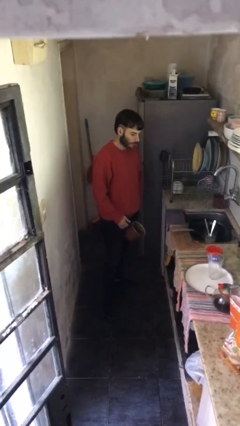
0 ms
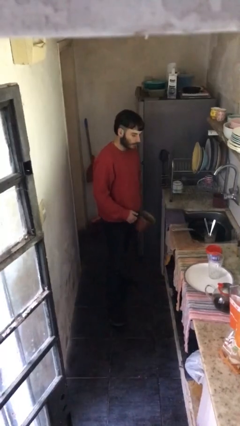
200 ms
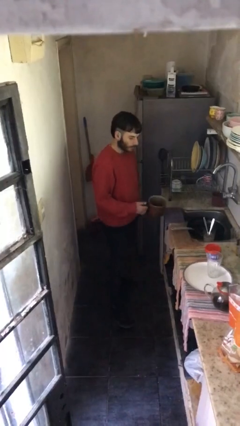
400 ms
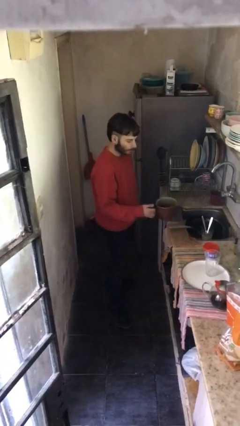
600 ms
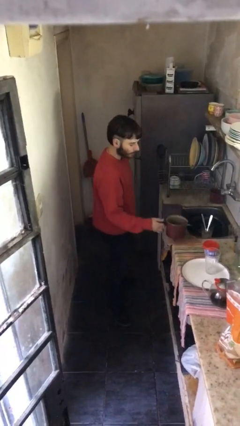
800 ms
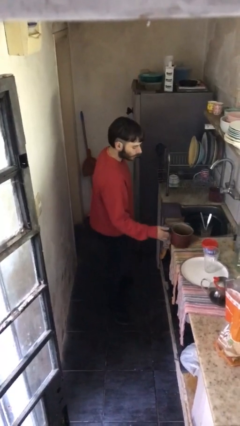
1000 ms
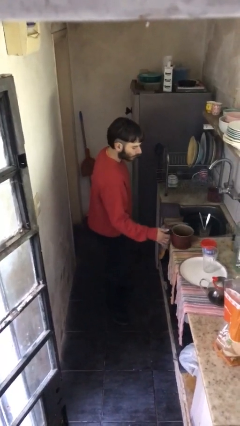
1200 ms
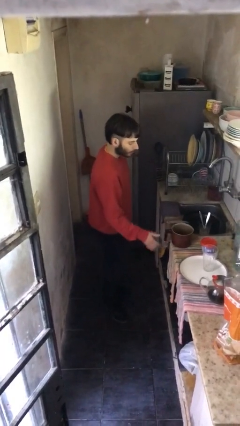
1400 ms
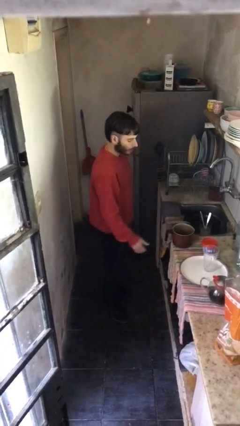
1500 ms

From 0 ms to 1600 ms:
person puts down object on countertop

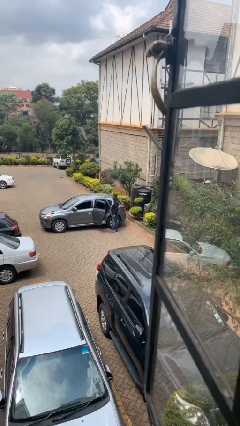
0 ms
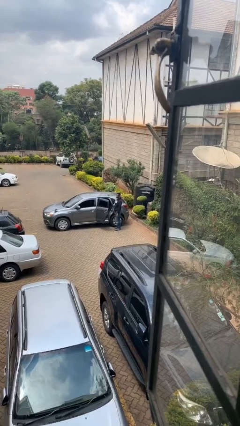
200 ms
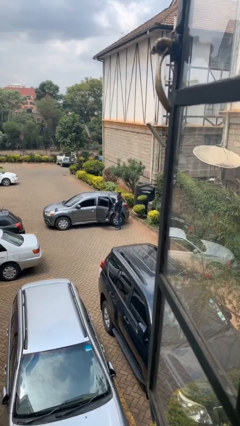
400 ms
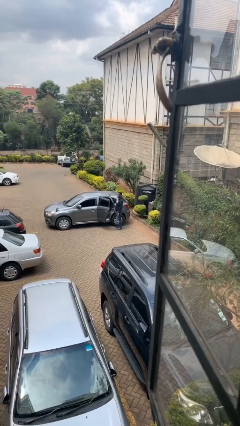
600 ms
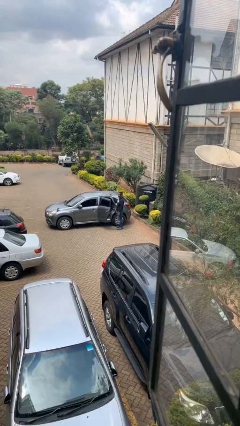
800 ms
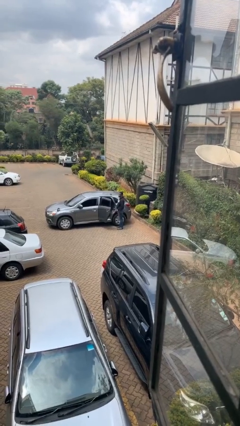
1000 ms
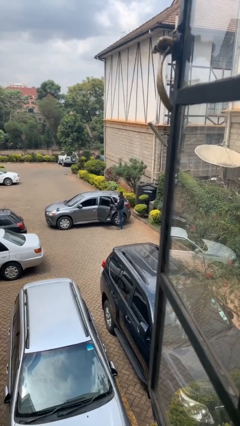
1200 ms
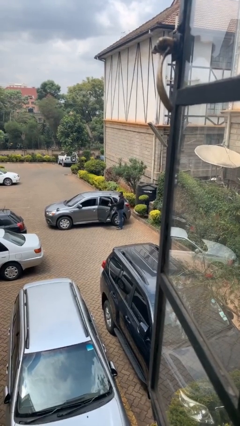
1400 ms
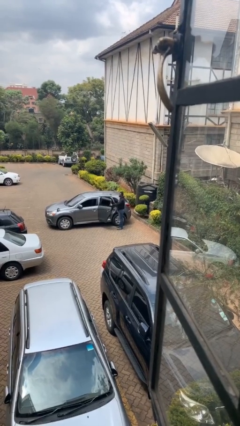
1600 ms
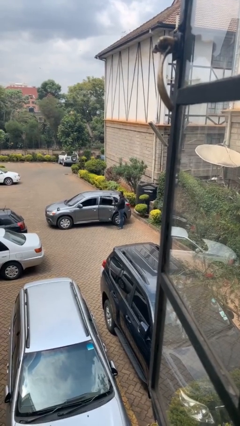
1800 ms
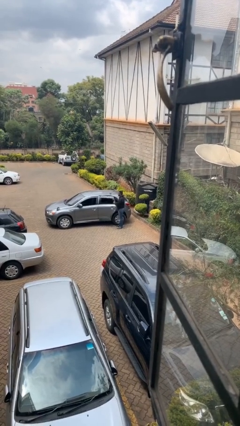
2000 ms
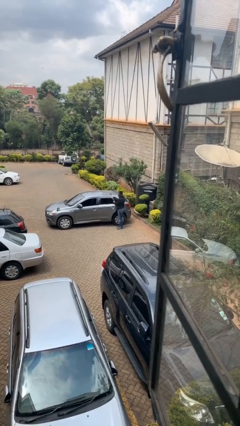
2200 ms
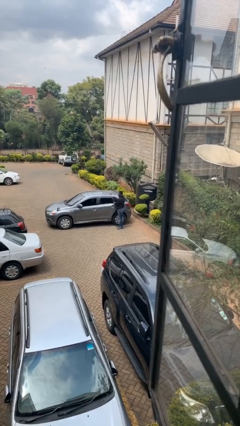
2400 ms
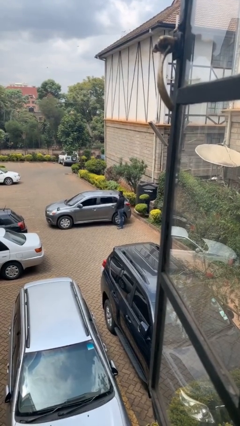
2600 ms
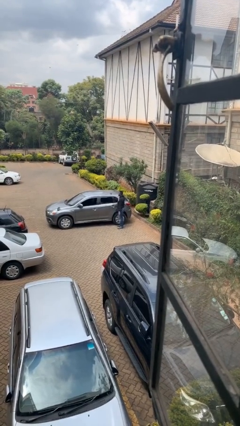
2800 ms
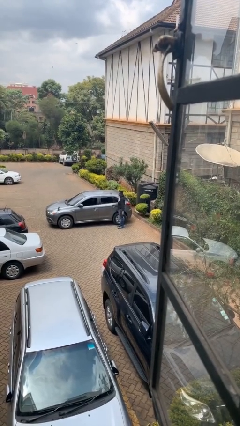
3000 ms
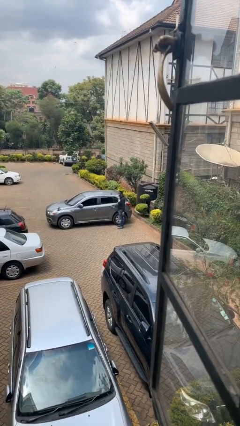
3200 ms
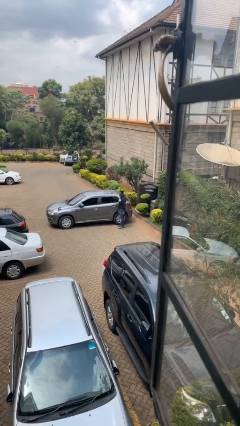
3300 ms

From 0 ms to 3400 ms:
person closes car door

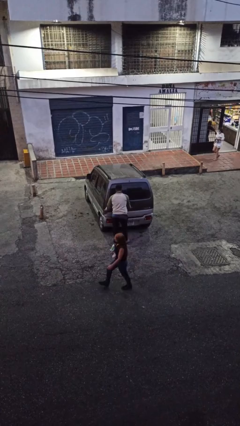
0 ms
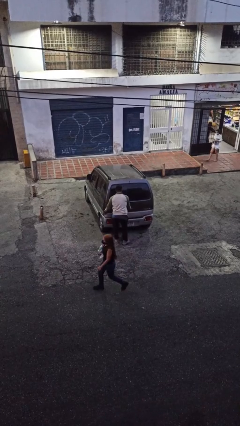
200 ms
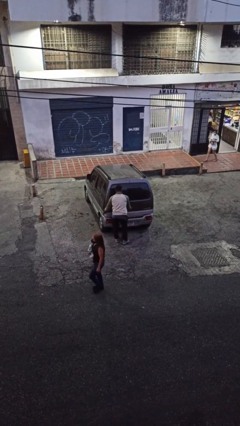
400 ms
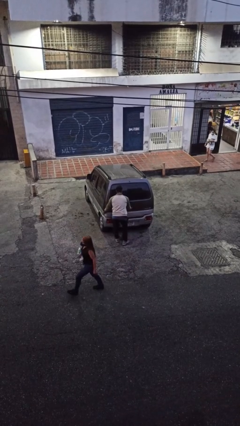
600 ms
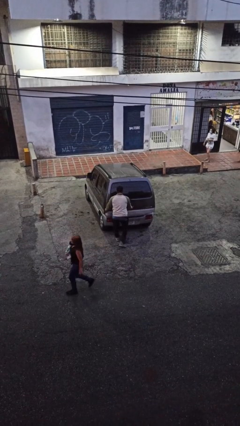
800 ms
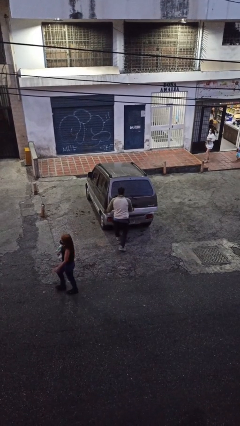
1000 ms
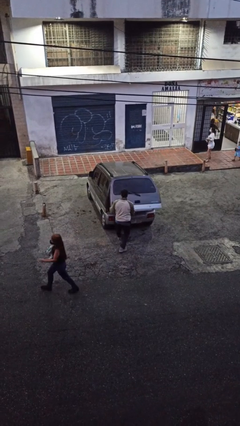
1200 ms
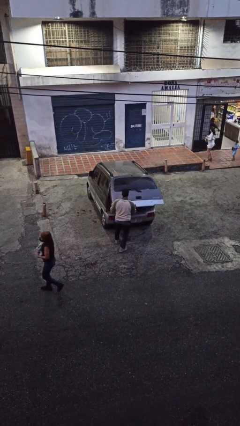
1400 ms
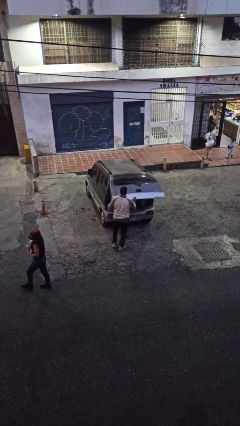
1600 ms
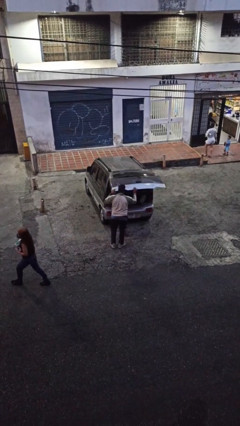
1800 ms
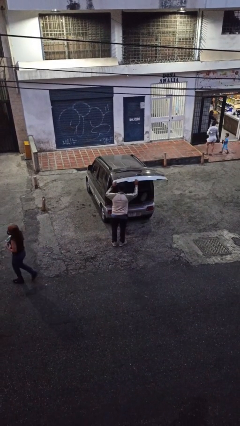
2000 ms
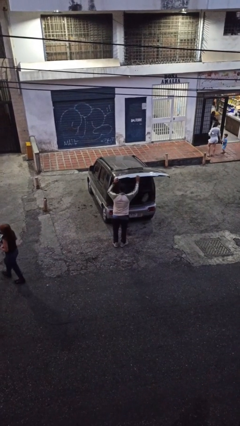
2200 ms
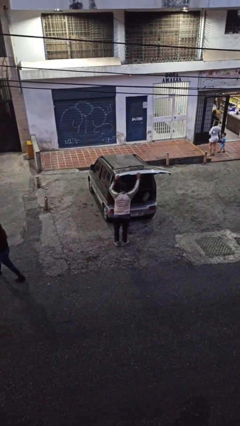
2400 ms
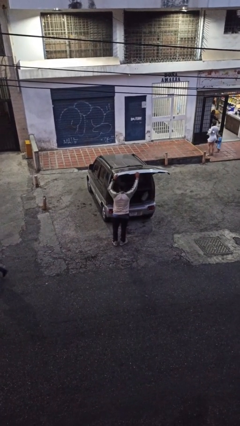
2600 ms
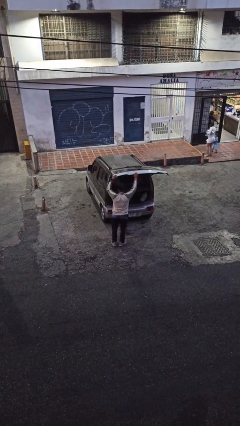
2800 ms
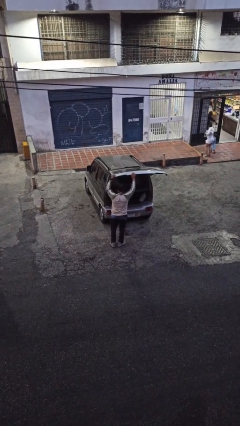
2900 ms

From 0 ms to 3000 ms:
person opens car trunk

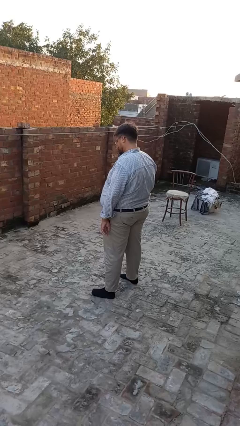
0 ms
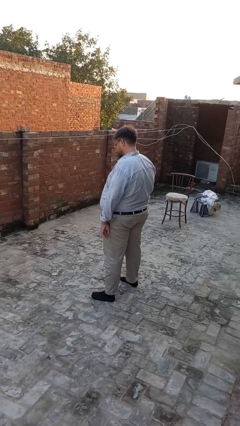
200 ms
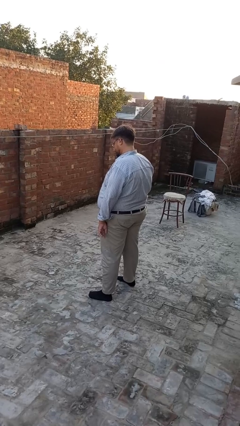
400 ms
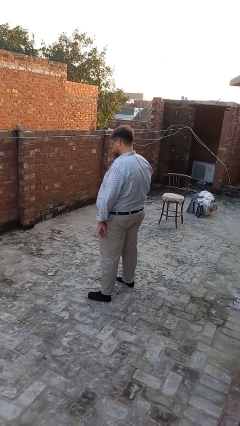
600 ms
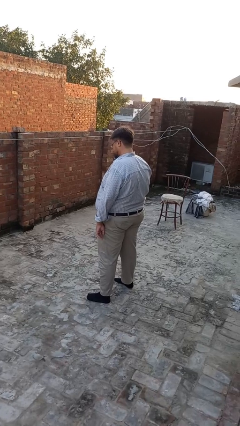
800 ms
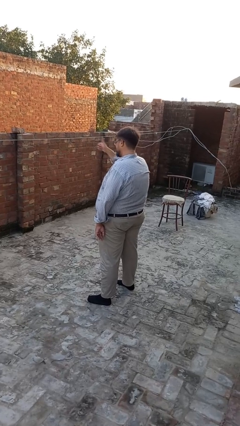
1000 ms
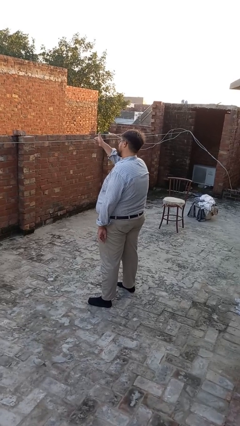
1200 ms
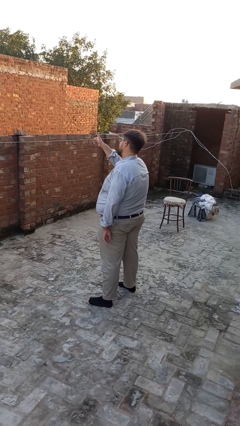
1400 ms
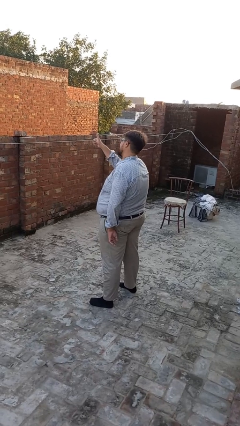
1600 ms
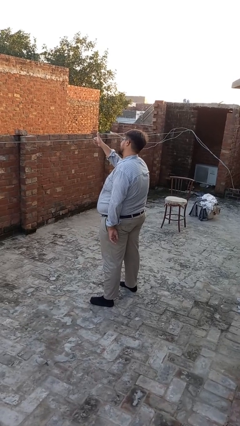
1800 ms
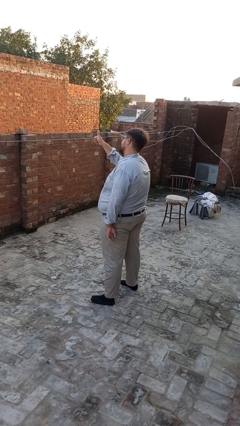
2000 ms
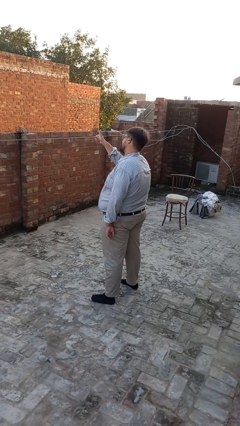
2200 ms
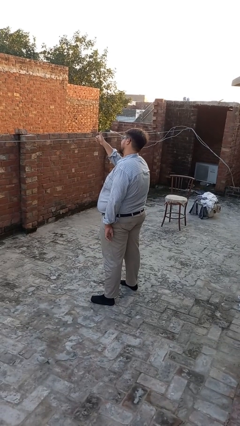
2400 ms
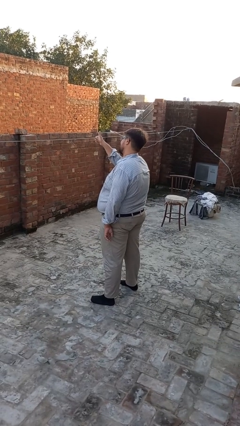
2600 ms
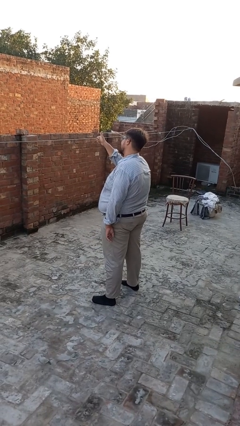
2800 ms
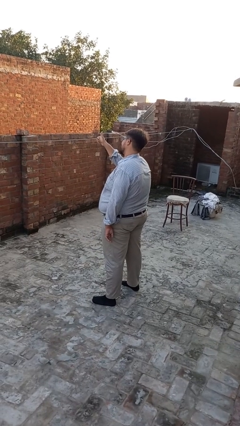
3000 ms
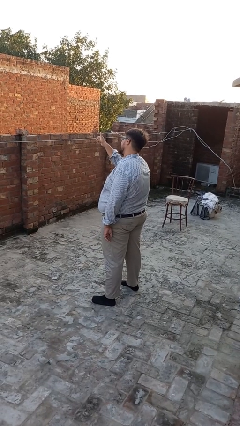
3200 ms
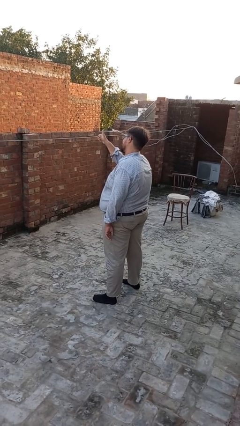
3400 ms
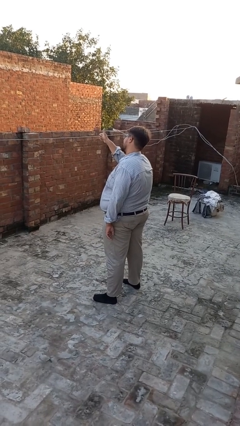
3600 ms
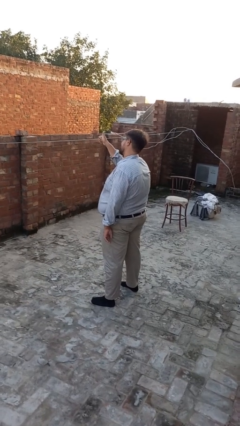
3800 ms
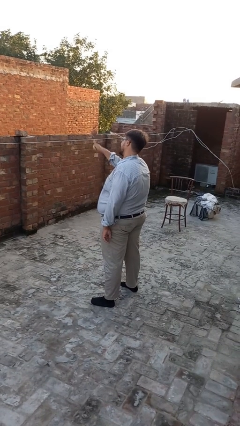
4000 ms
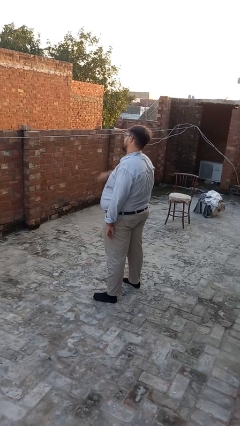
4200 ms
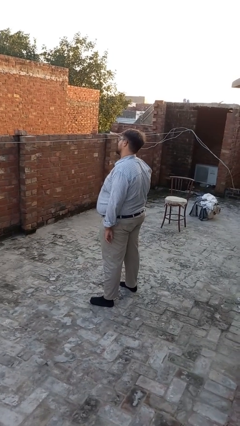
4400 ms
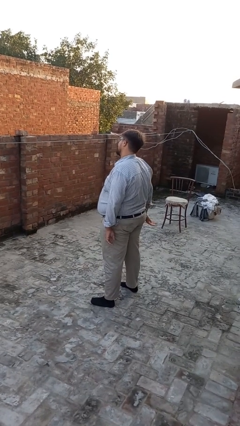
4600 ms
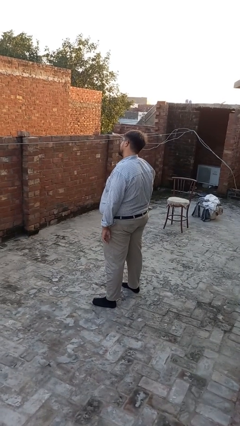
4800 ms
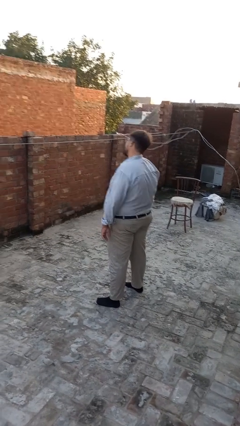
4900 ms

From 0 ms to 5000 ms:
person gestures thumbs up

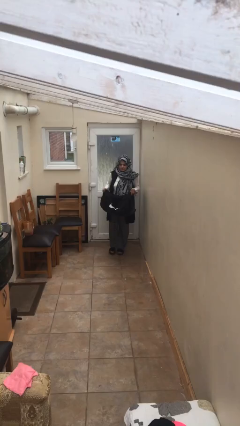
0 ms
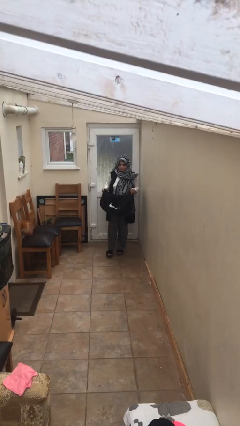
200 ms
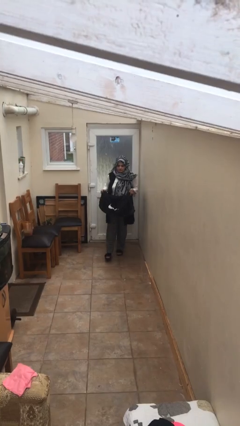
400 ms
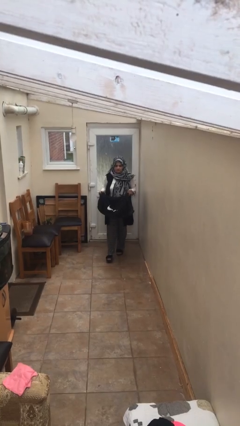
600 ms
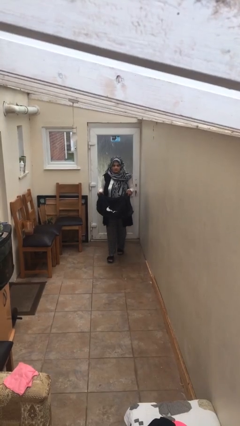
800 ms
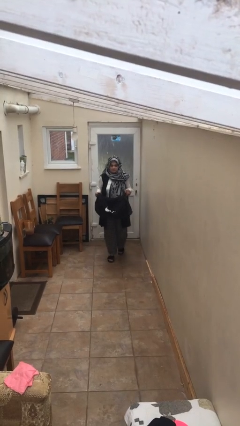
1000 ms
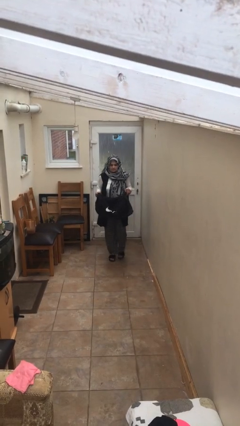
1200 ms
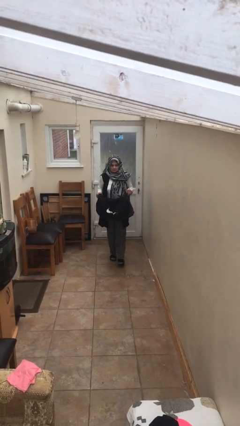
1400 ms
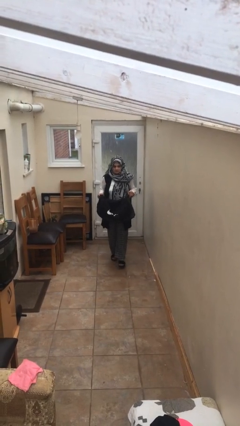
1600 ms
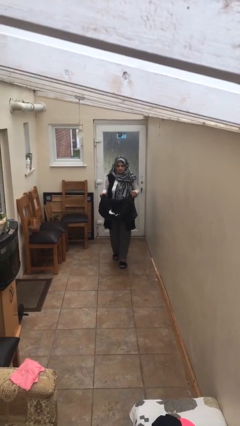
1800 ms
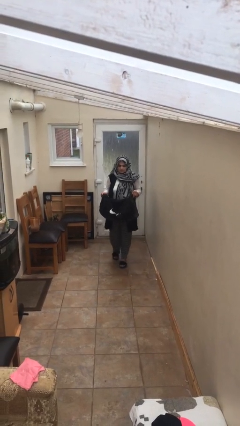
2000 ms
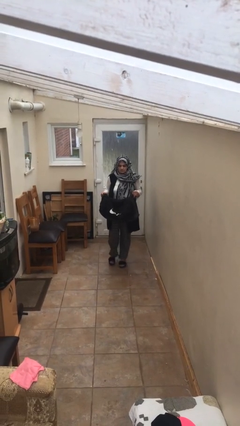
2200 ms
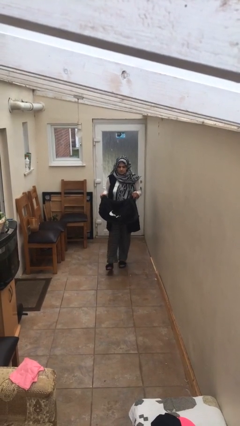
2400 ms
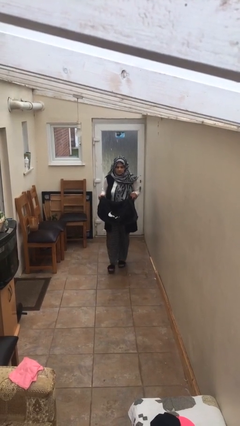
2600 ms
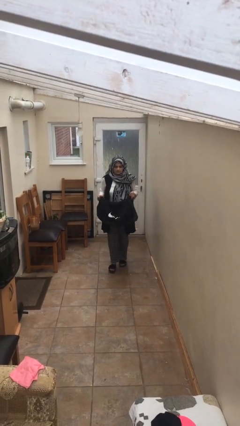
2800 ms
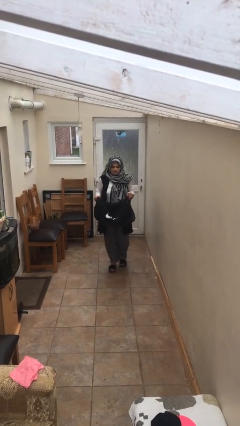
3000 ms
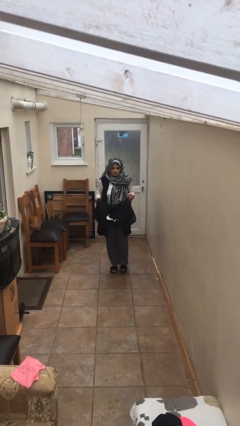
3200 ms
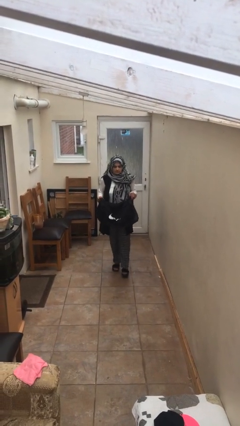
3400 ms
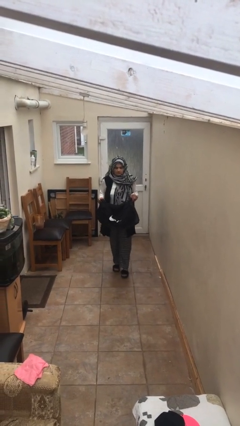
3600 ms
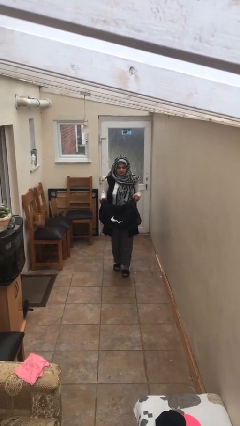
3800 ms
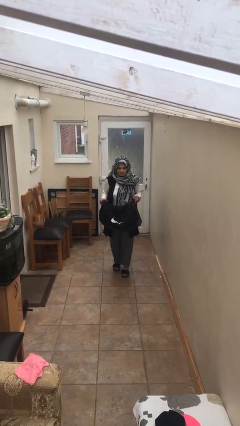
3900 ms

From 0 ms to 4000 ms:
person carries heavy object

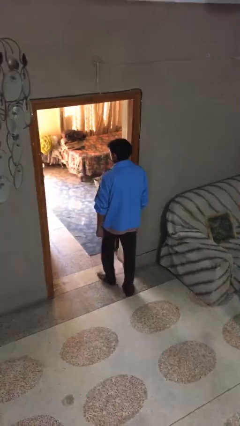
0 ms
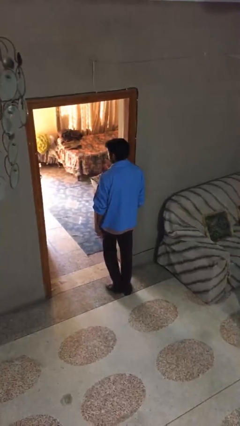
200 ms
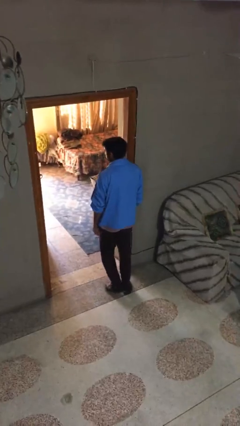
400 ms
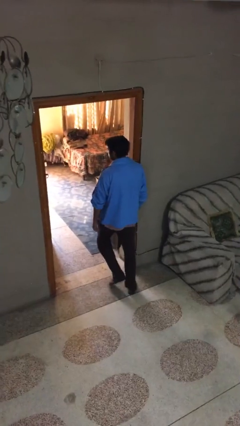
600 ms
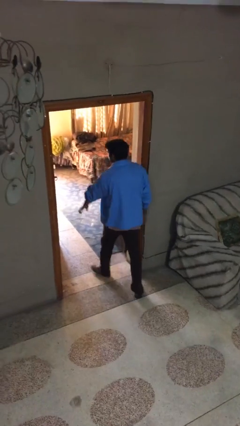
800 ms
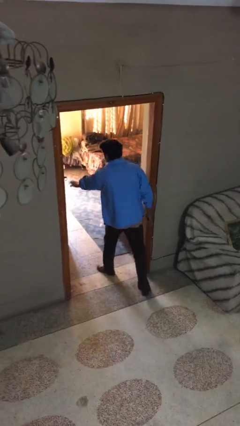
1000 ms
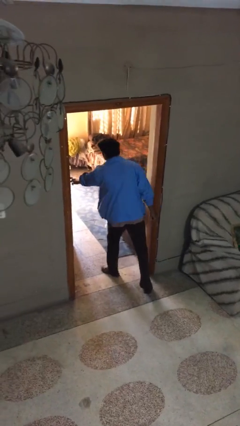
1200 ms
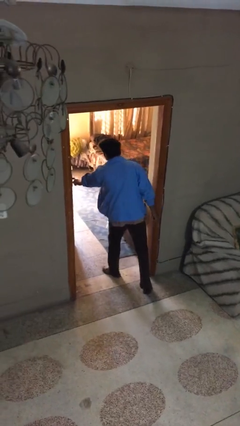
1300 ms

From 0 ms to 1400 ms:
person closes facility door
